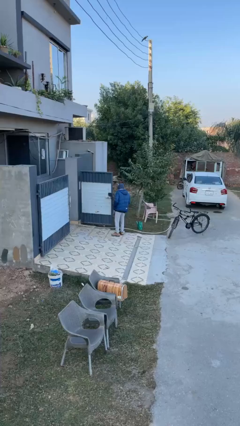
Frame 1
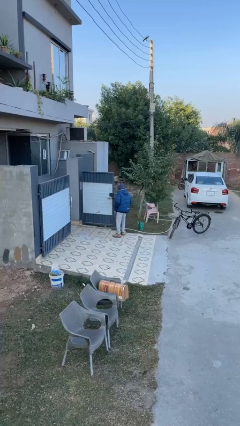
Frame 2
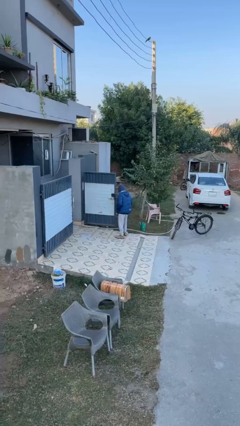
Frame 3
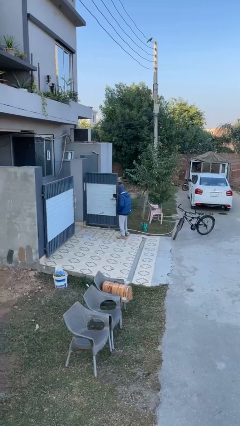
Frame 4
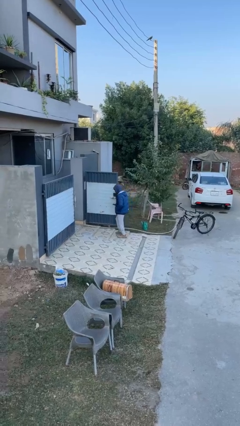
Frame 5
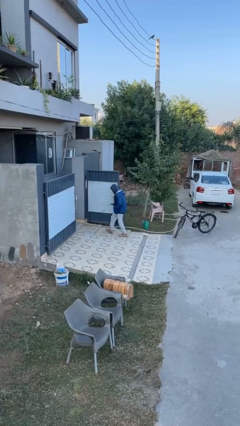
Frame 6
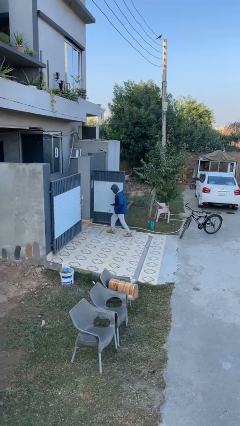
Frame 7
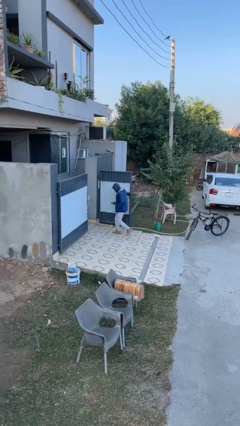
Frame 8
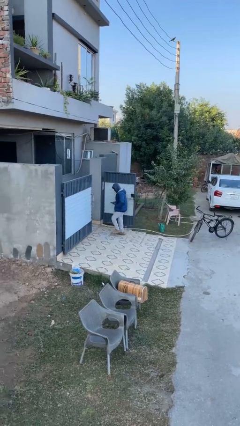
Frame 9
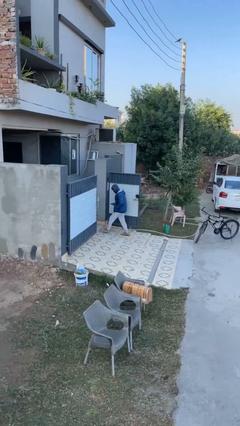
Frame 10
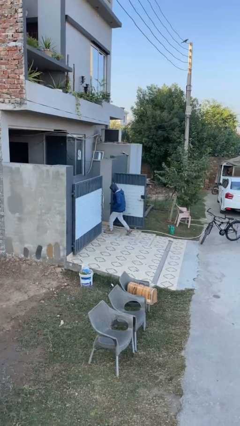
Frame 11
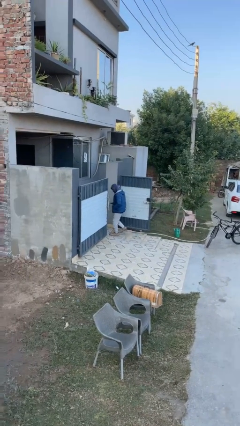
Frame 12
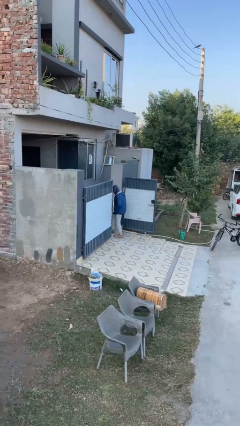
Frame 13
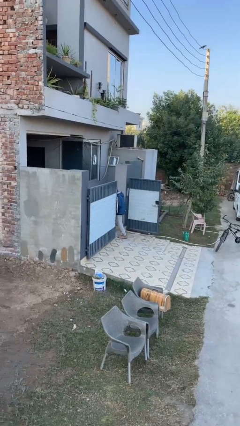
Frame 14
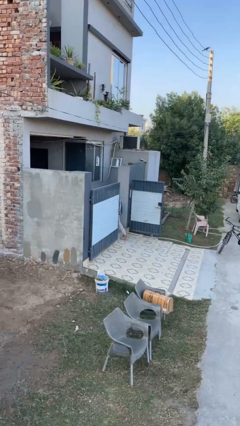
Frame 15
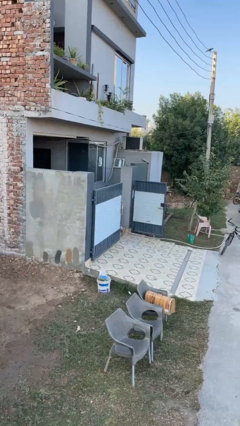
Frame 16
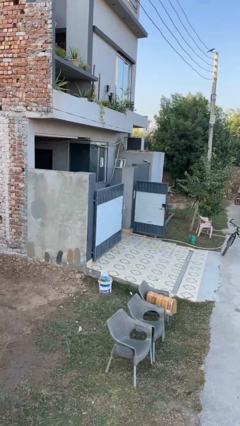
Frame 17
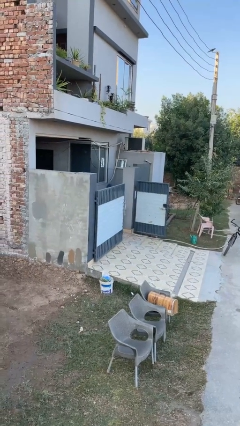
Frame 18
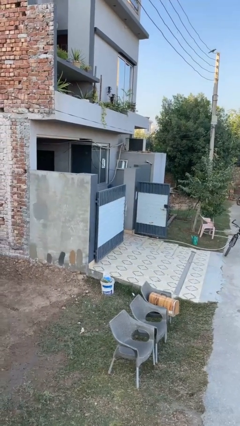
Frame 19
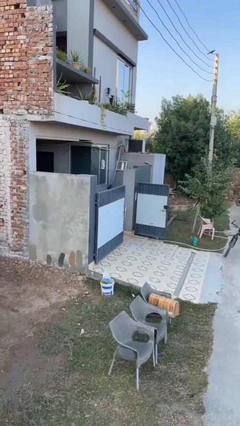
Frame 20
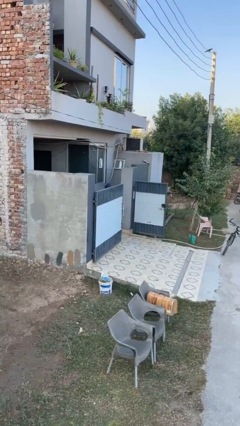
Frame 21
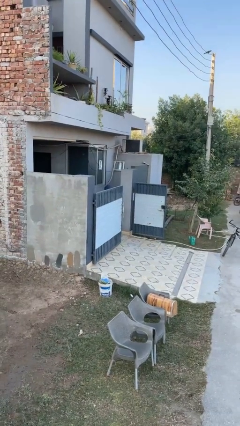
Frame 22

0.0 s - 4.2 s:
person exits scene through structure

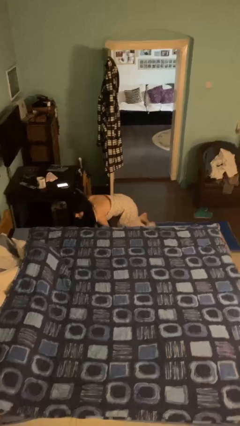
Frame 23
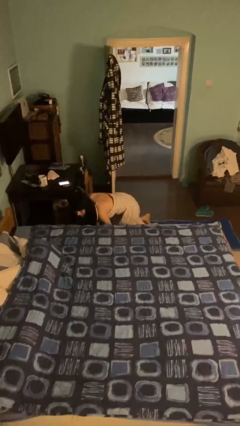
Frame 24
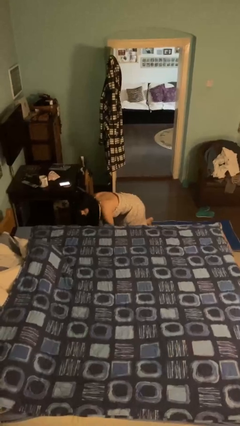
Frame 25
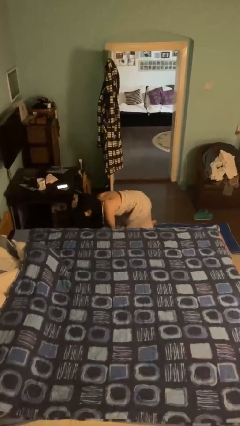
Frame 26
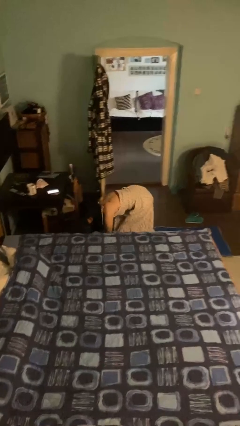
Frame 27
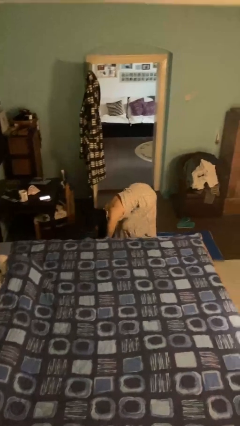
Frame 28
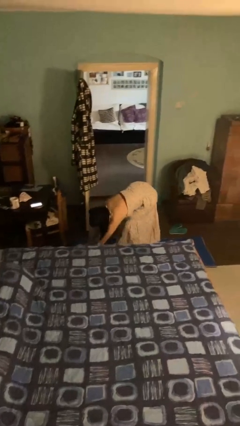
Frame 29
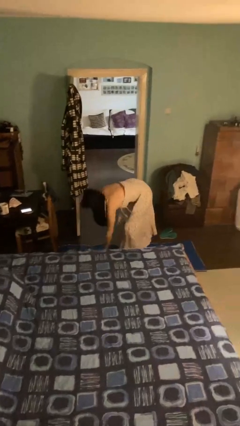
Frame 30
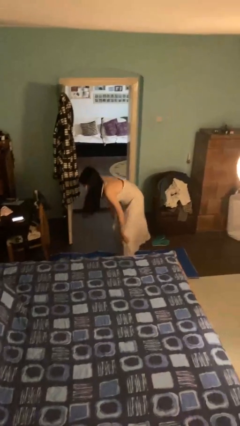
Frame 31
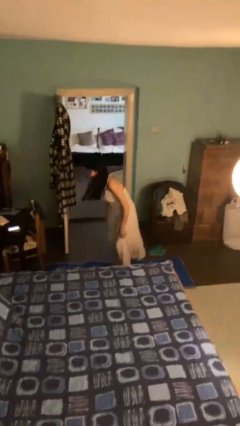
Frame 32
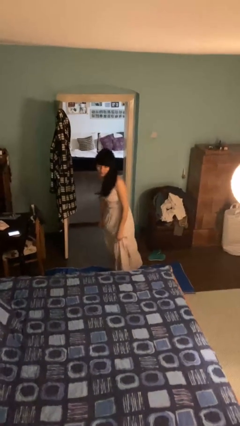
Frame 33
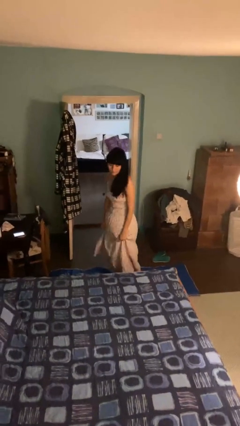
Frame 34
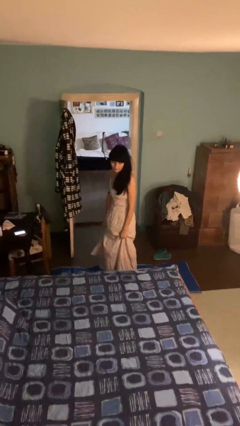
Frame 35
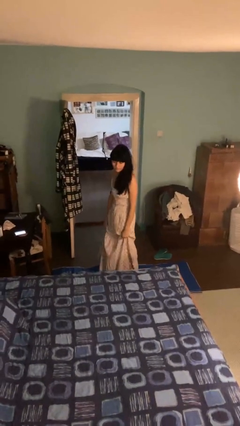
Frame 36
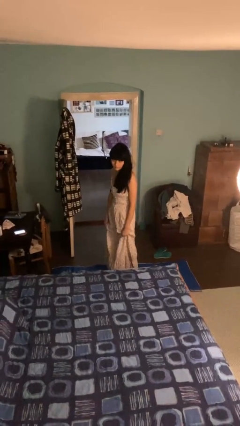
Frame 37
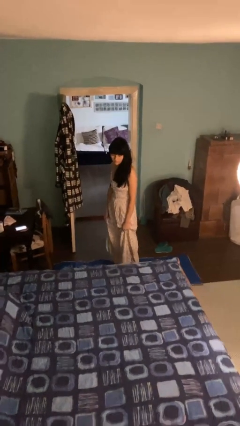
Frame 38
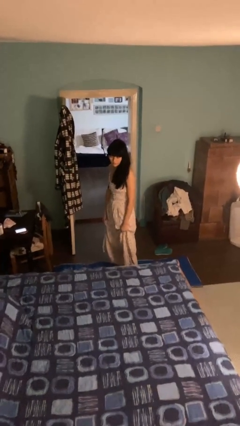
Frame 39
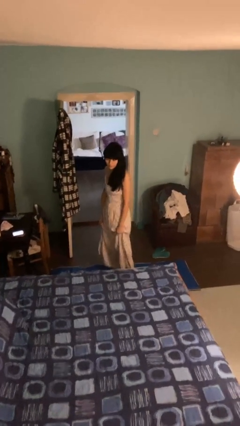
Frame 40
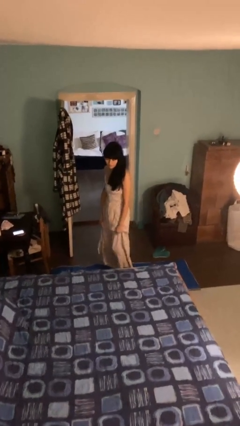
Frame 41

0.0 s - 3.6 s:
person stands up from floor

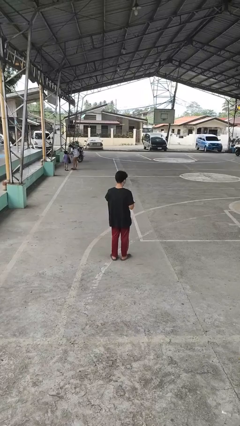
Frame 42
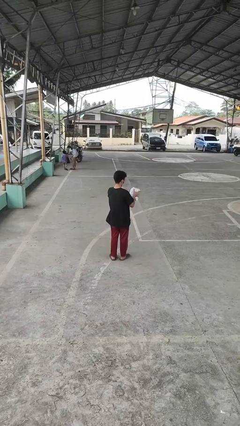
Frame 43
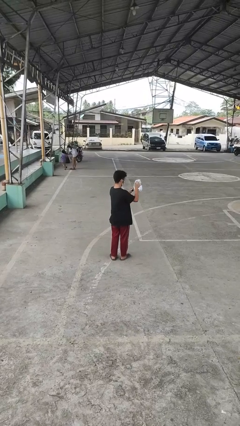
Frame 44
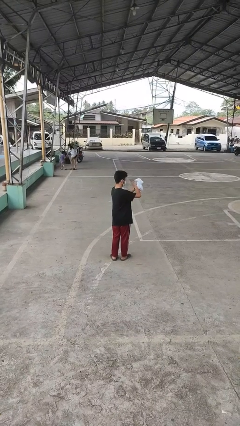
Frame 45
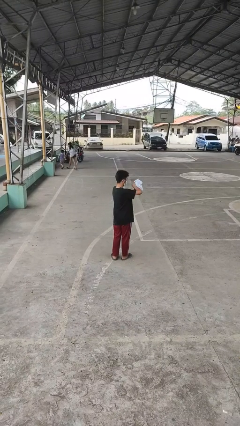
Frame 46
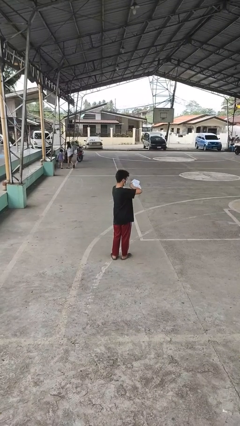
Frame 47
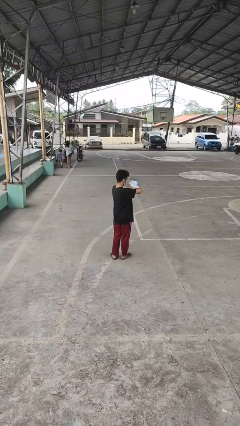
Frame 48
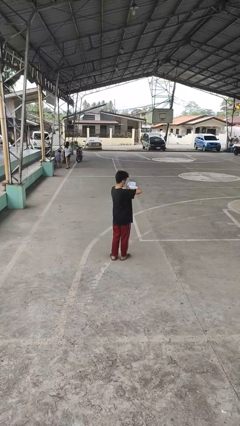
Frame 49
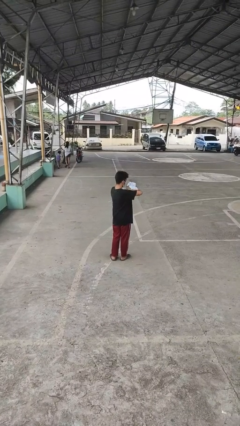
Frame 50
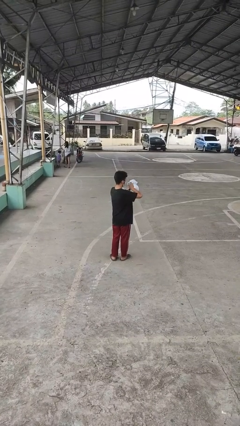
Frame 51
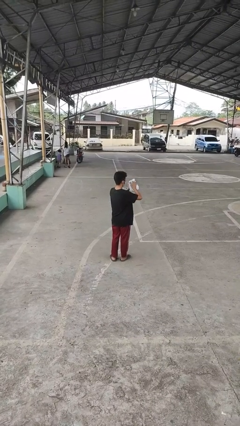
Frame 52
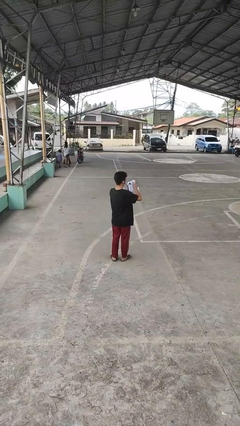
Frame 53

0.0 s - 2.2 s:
person squeezes object

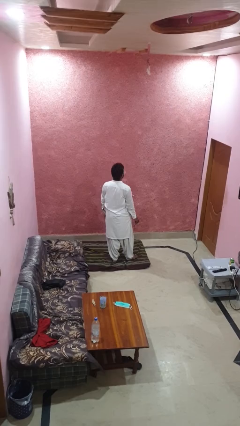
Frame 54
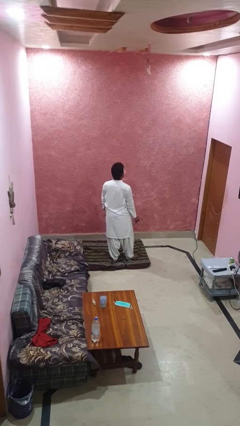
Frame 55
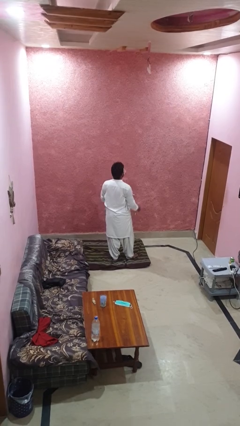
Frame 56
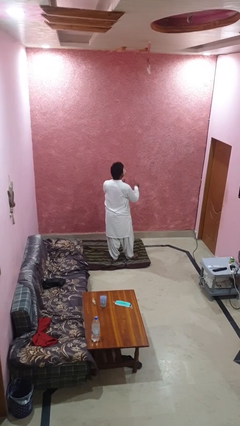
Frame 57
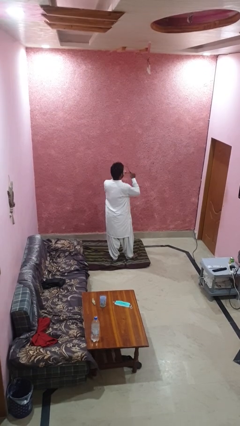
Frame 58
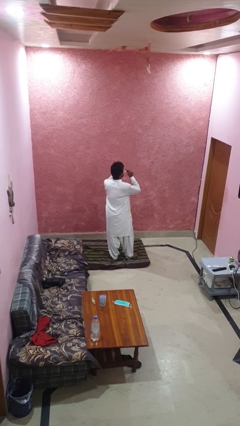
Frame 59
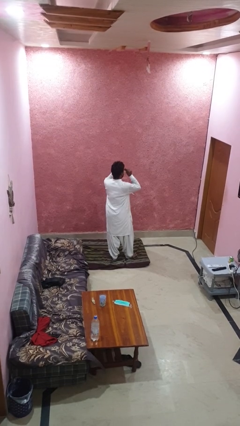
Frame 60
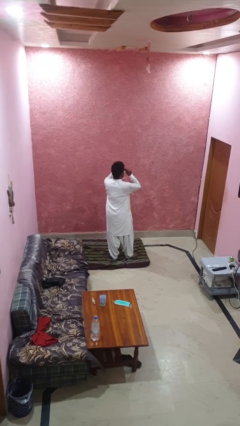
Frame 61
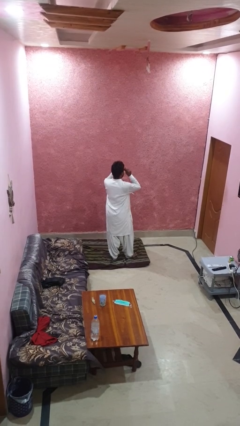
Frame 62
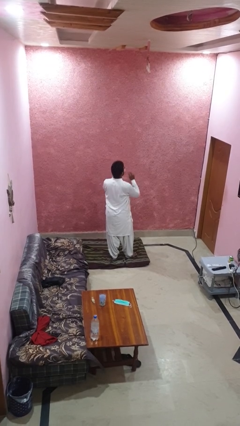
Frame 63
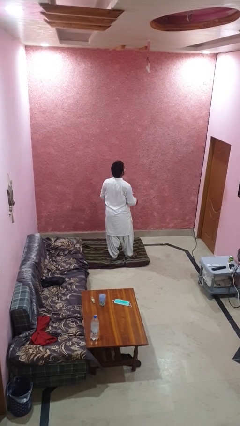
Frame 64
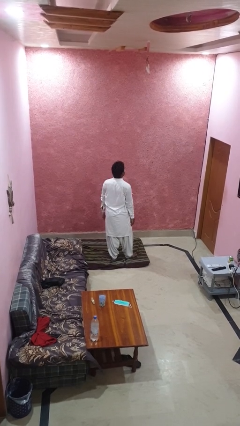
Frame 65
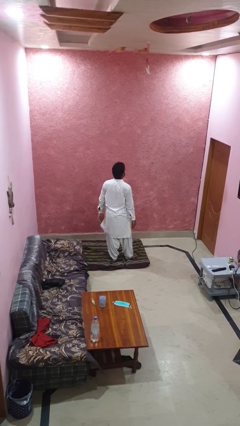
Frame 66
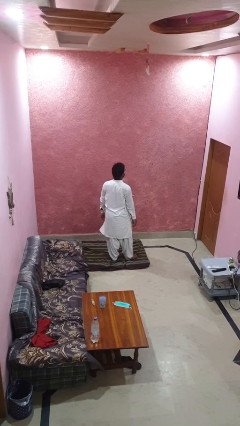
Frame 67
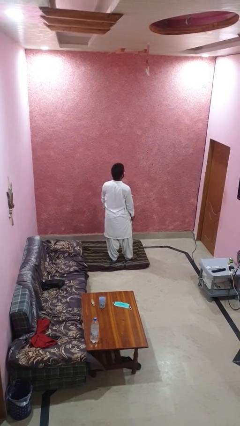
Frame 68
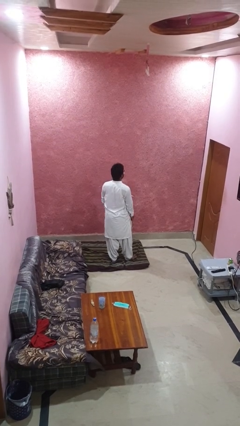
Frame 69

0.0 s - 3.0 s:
person puts on glasses

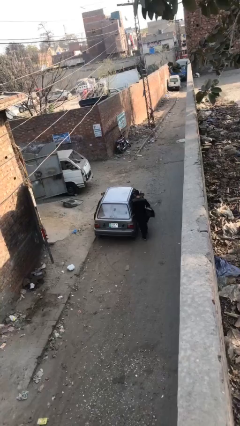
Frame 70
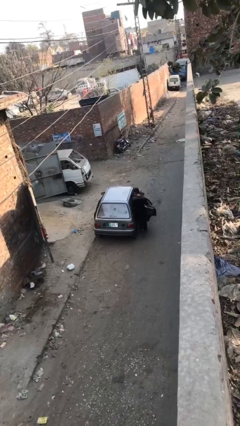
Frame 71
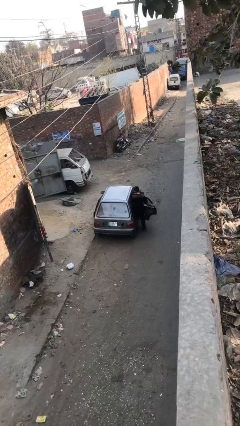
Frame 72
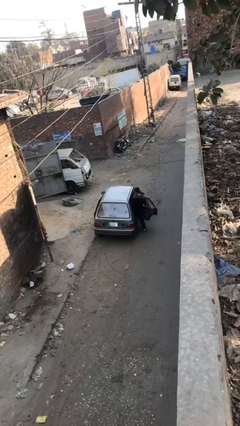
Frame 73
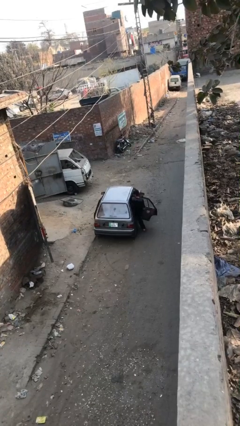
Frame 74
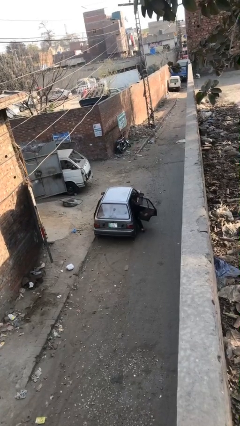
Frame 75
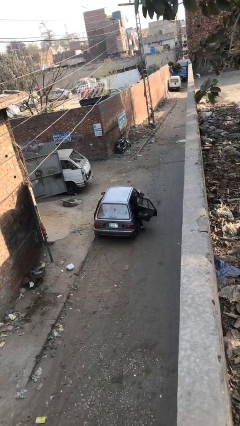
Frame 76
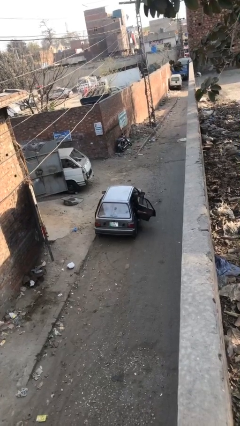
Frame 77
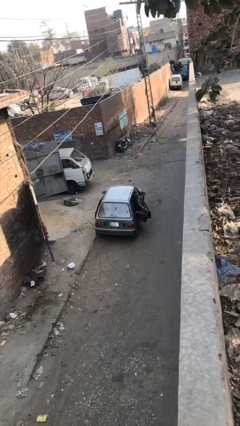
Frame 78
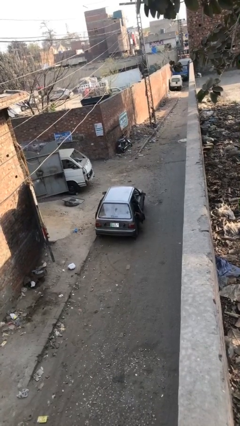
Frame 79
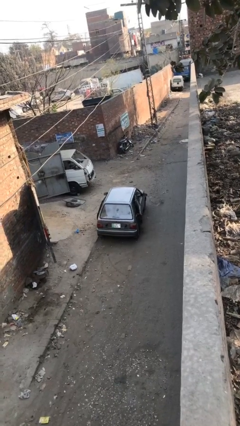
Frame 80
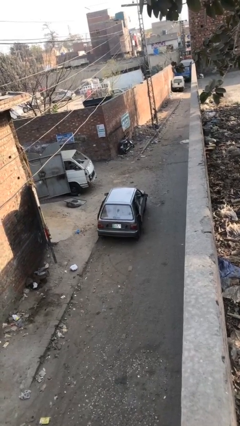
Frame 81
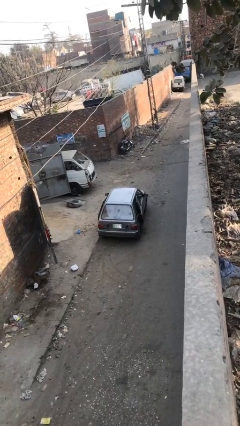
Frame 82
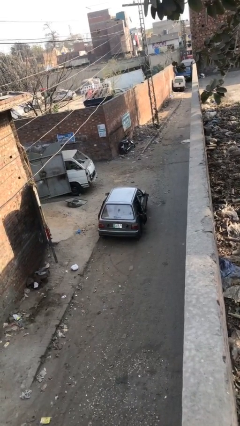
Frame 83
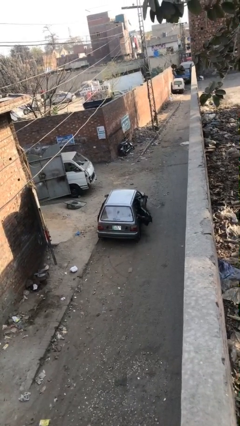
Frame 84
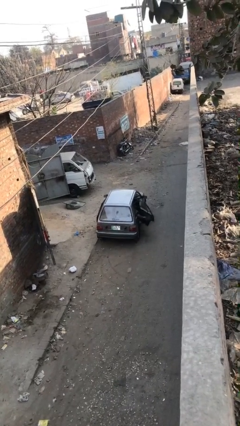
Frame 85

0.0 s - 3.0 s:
car picks up person

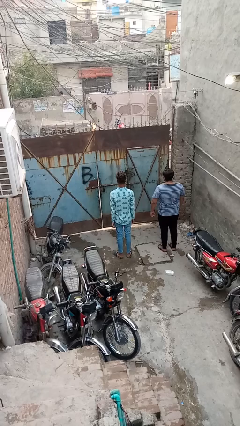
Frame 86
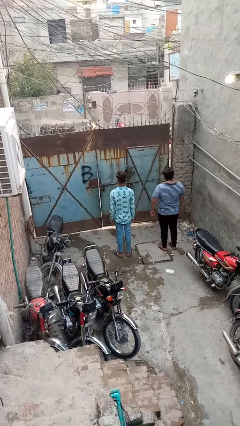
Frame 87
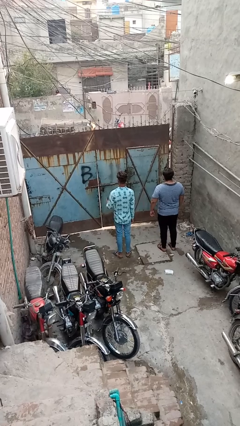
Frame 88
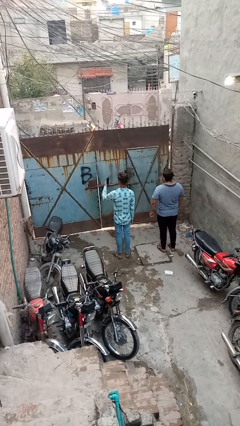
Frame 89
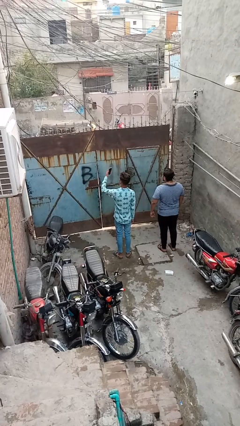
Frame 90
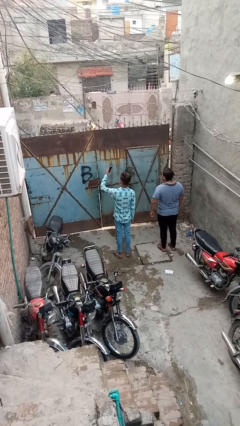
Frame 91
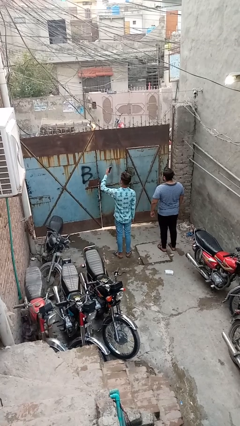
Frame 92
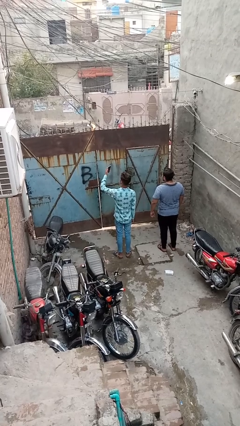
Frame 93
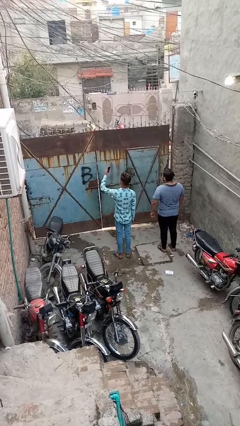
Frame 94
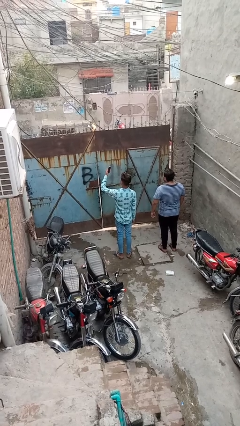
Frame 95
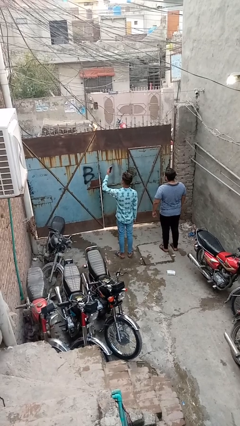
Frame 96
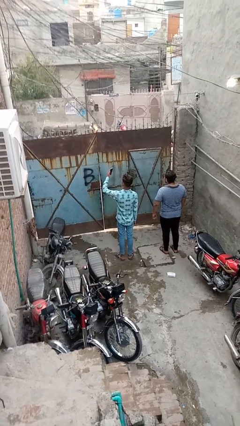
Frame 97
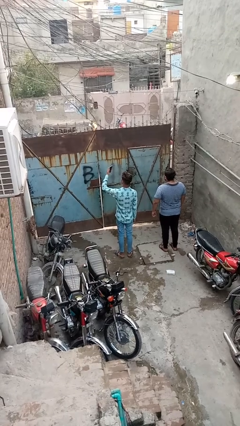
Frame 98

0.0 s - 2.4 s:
person takes selfie with person
